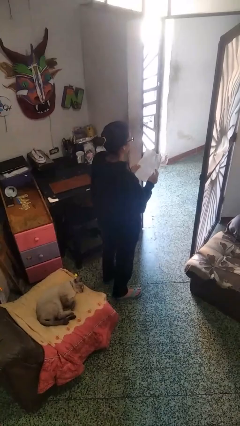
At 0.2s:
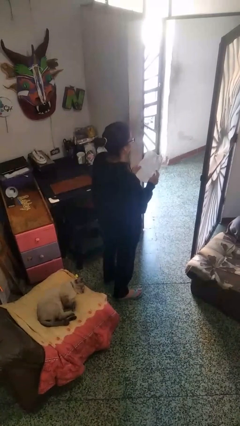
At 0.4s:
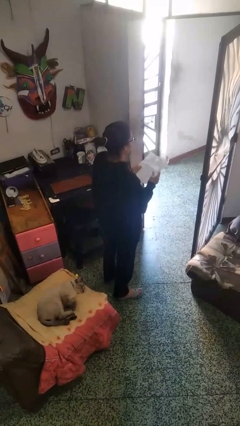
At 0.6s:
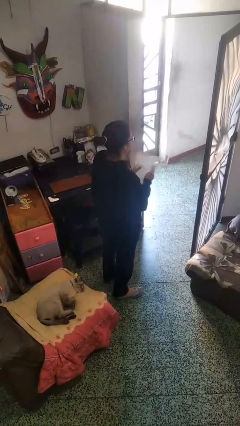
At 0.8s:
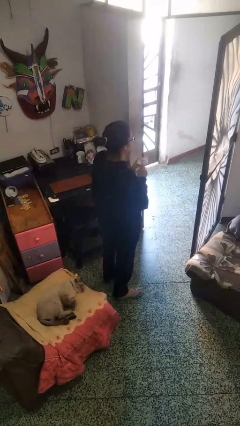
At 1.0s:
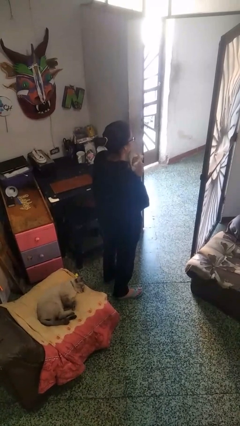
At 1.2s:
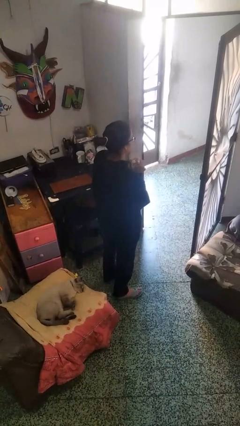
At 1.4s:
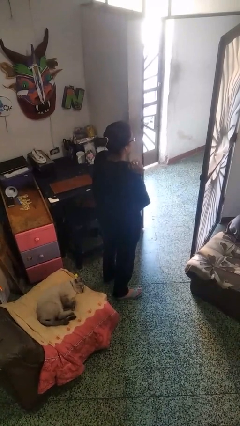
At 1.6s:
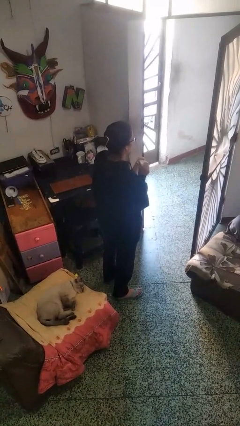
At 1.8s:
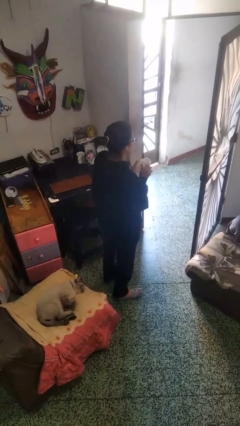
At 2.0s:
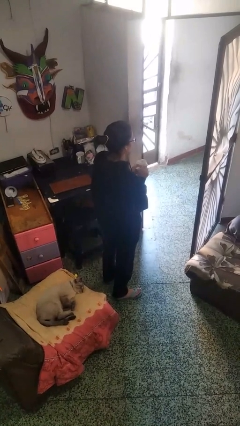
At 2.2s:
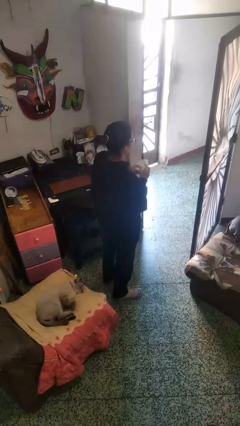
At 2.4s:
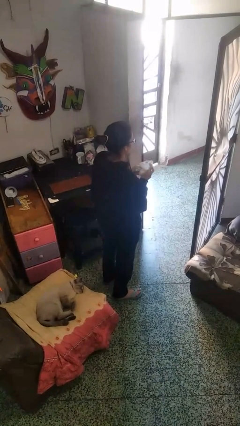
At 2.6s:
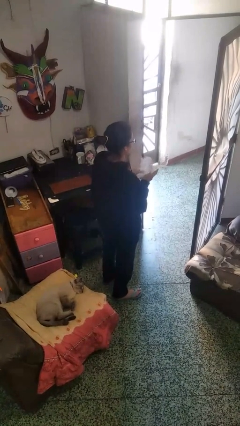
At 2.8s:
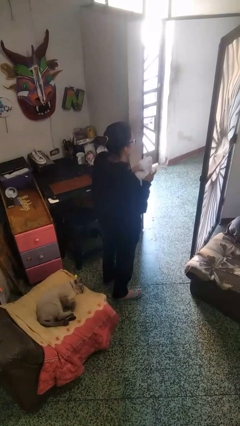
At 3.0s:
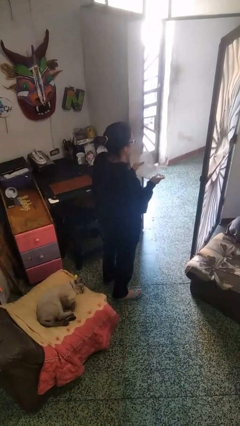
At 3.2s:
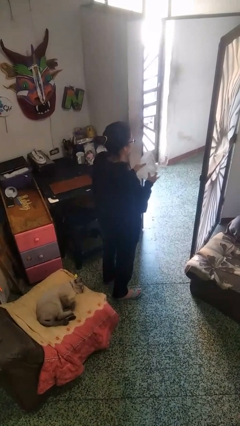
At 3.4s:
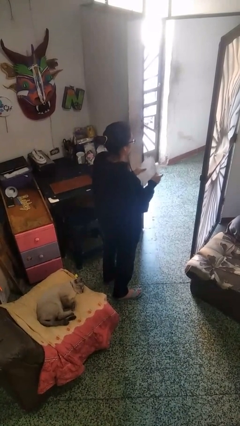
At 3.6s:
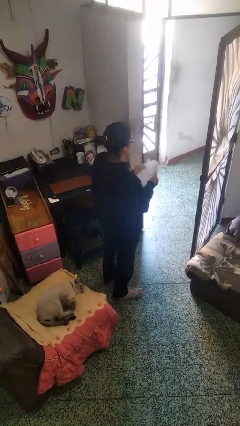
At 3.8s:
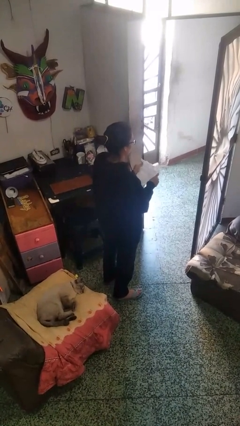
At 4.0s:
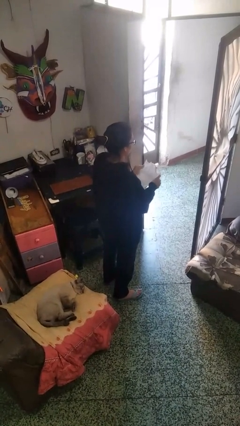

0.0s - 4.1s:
person crumples paper

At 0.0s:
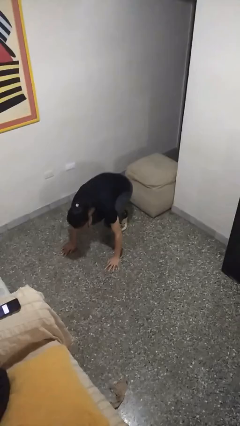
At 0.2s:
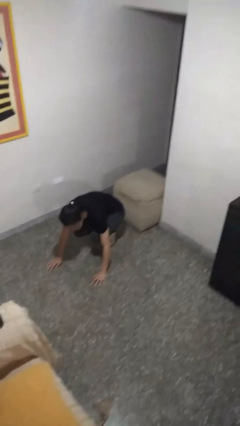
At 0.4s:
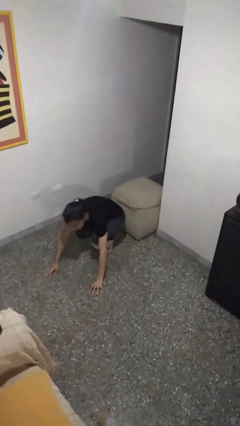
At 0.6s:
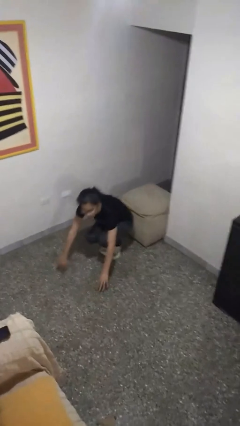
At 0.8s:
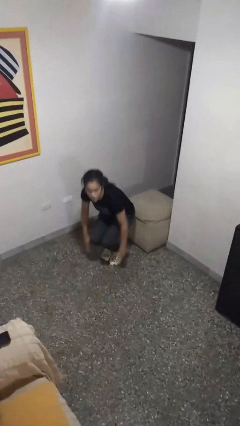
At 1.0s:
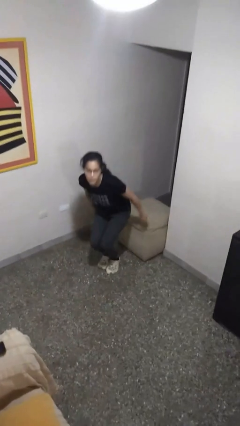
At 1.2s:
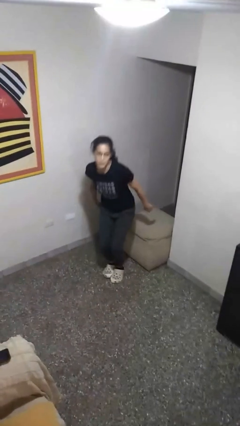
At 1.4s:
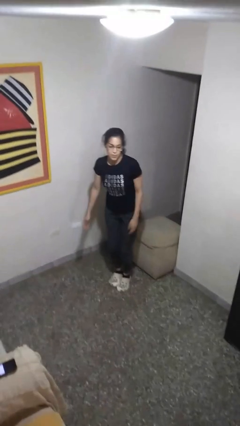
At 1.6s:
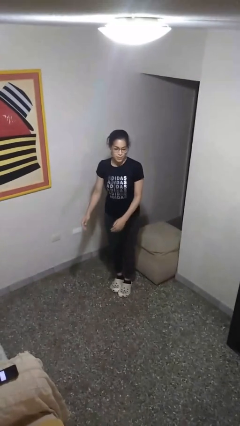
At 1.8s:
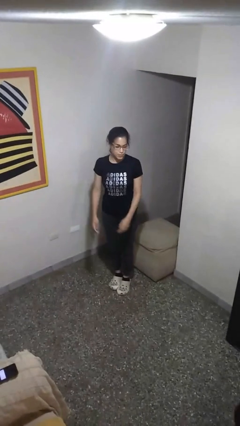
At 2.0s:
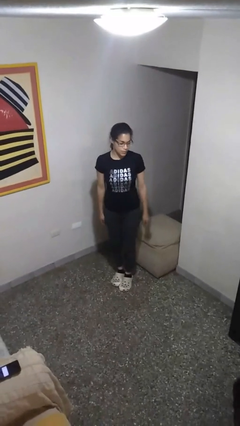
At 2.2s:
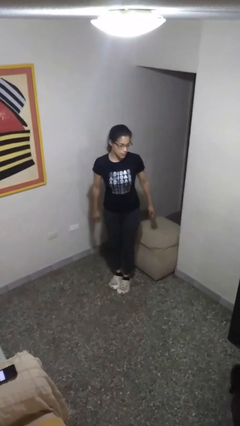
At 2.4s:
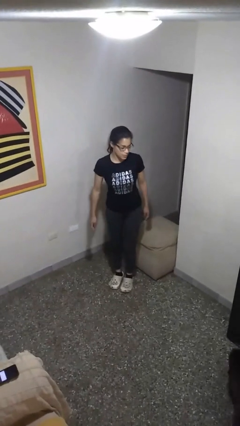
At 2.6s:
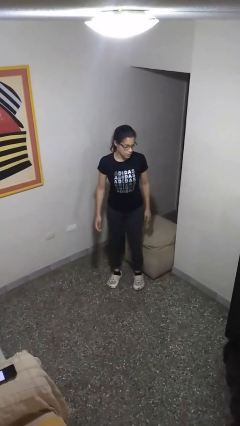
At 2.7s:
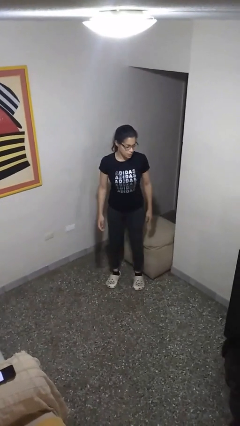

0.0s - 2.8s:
person stands up from floor

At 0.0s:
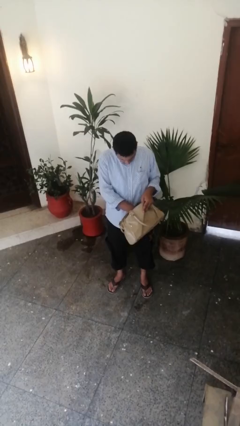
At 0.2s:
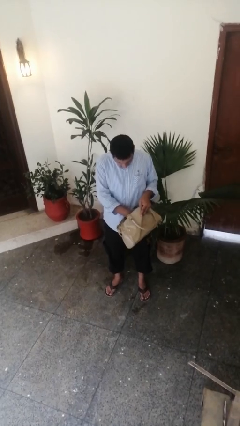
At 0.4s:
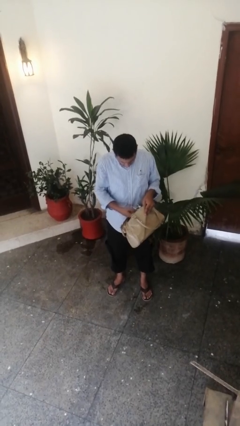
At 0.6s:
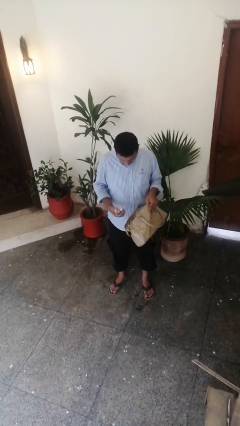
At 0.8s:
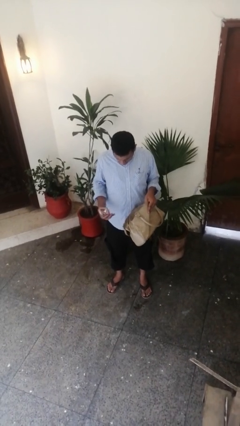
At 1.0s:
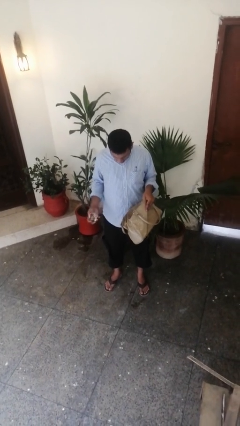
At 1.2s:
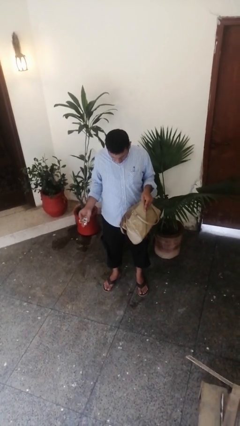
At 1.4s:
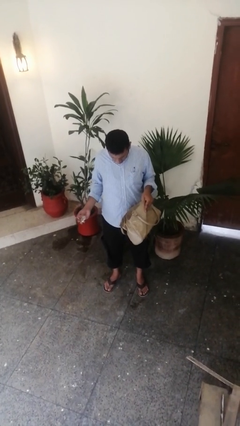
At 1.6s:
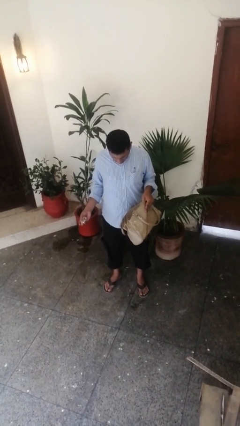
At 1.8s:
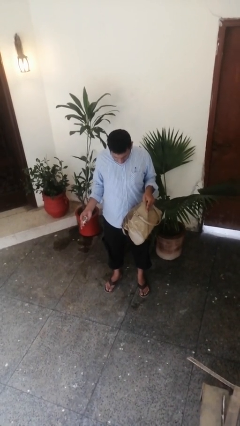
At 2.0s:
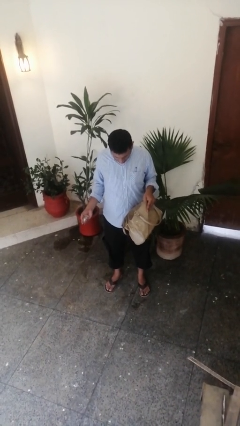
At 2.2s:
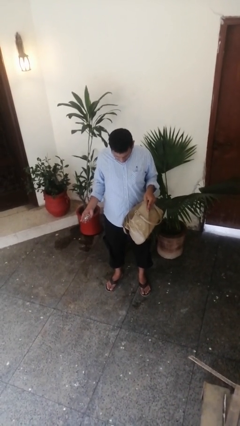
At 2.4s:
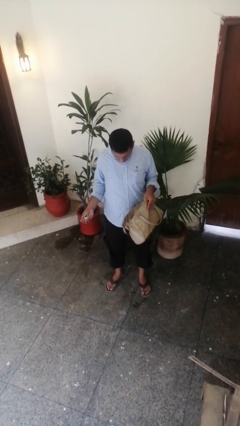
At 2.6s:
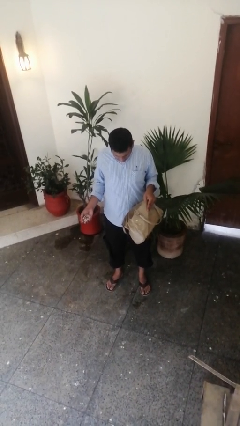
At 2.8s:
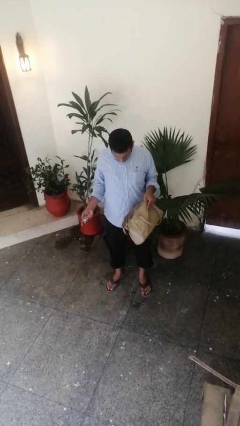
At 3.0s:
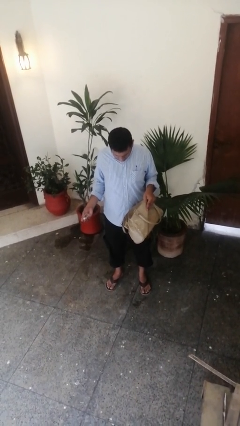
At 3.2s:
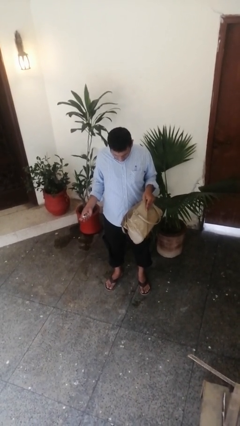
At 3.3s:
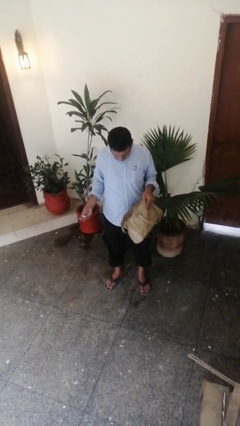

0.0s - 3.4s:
person takes object from purse

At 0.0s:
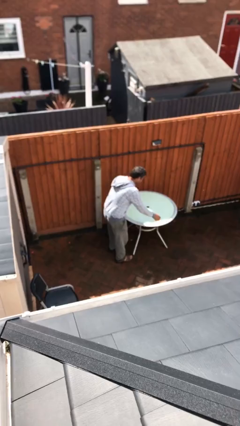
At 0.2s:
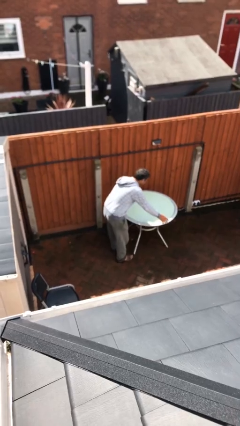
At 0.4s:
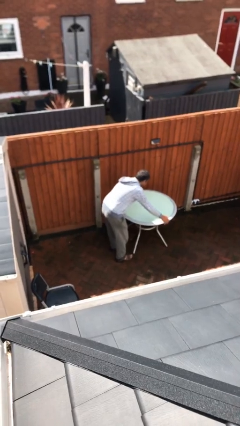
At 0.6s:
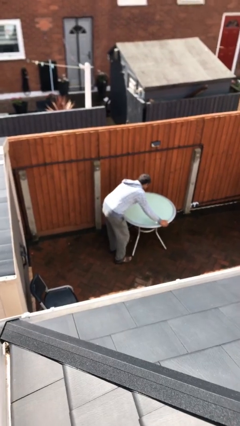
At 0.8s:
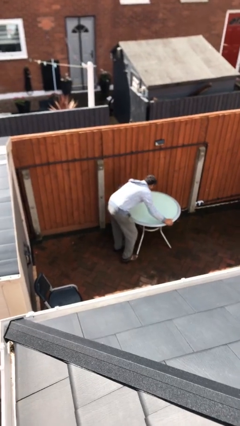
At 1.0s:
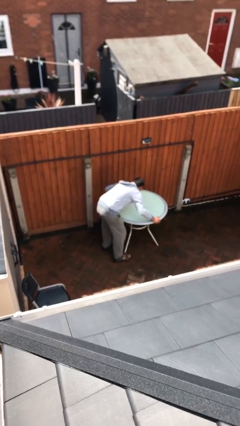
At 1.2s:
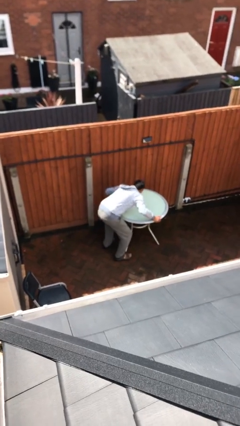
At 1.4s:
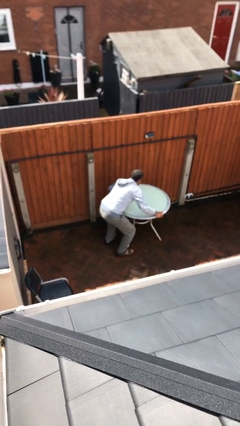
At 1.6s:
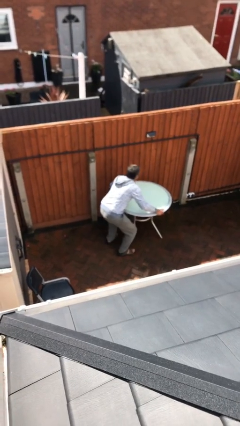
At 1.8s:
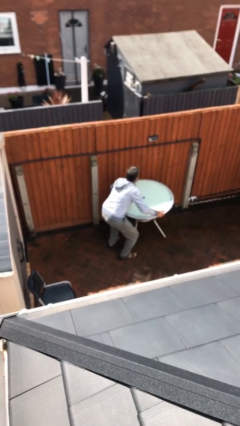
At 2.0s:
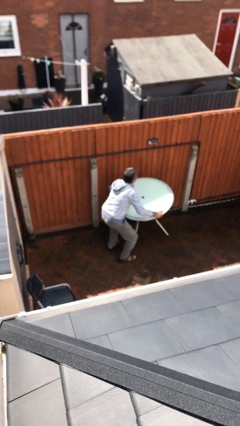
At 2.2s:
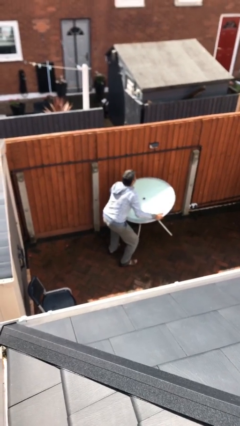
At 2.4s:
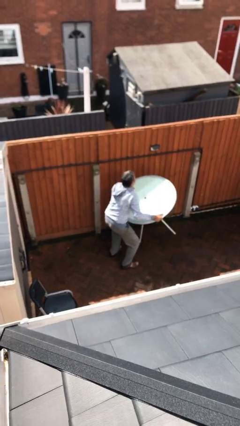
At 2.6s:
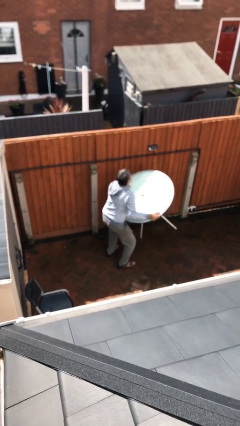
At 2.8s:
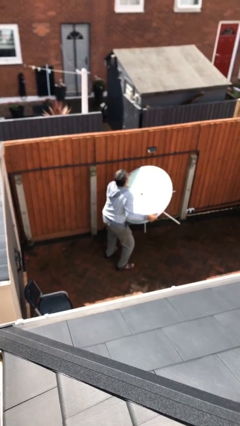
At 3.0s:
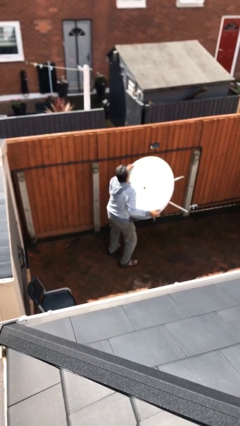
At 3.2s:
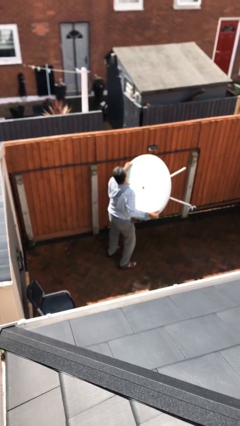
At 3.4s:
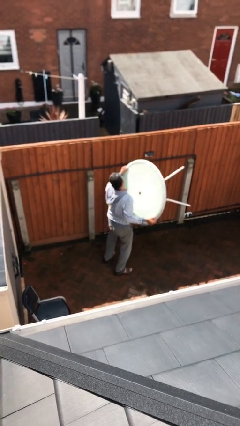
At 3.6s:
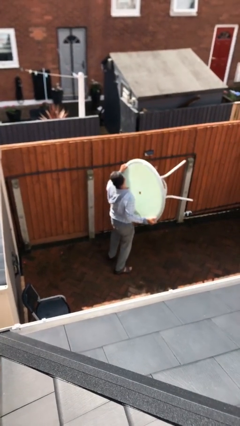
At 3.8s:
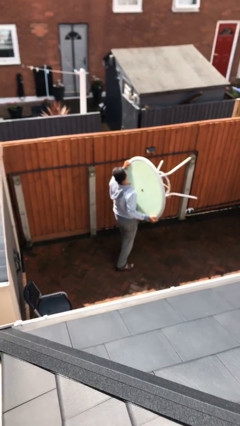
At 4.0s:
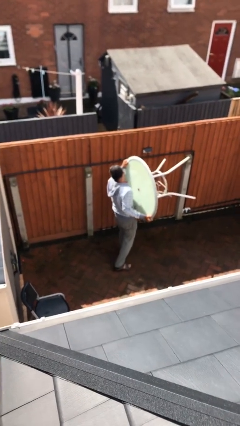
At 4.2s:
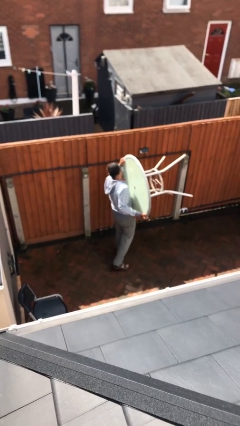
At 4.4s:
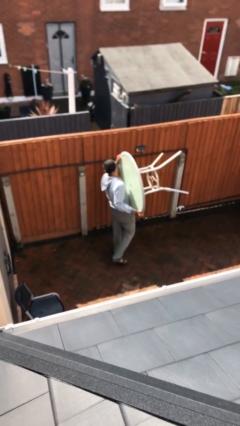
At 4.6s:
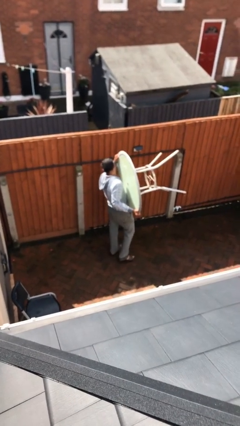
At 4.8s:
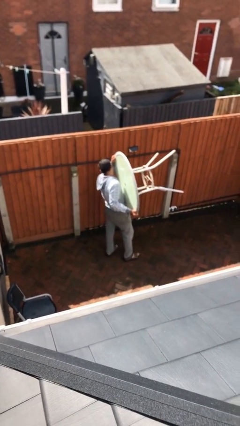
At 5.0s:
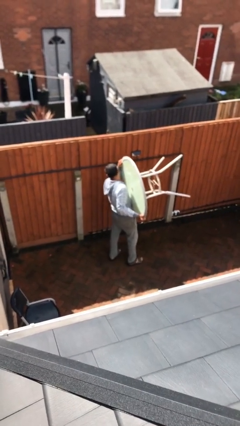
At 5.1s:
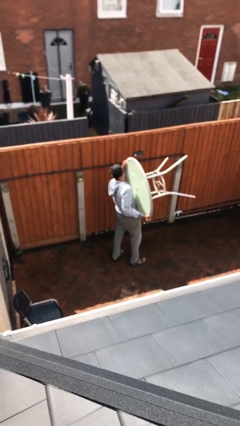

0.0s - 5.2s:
person picks up object from floor

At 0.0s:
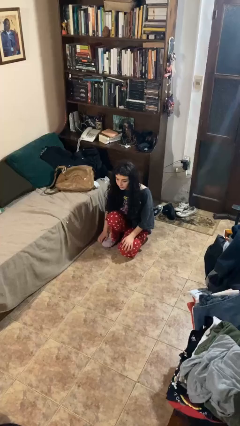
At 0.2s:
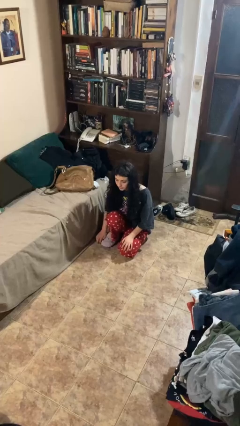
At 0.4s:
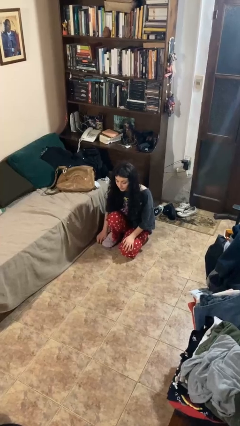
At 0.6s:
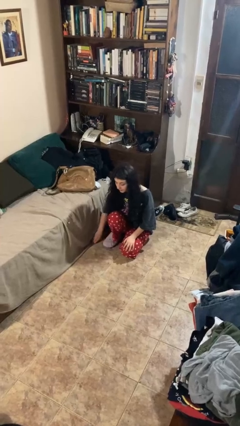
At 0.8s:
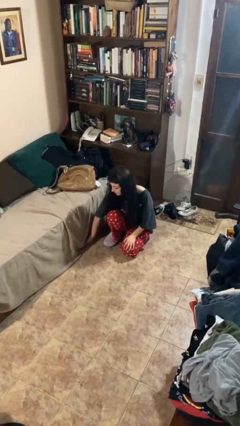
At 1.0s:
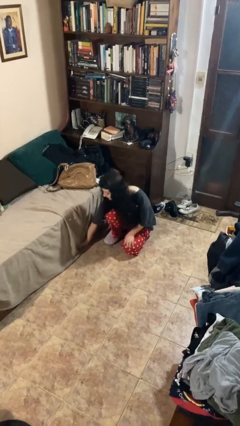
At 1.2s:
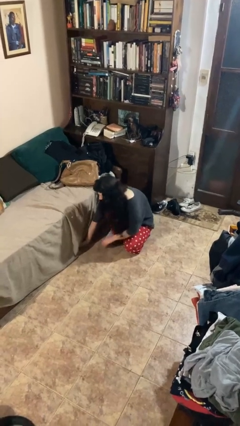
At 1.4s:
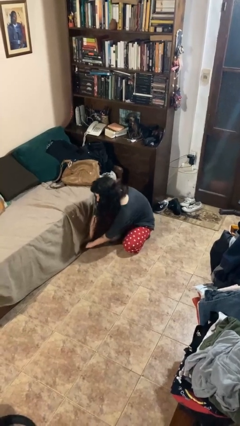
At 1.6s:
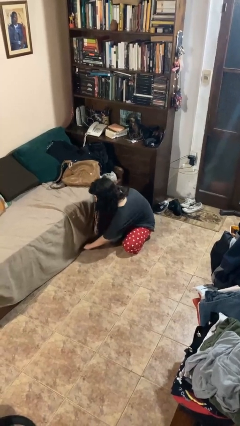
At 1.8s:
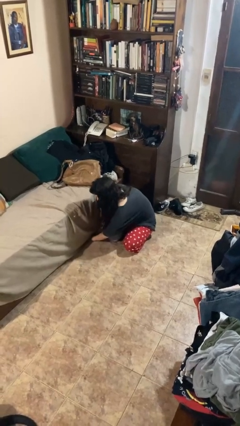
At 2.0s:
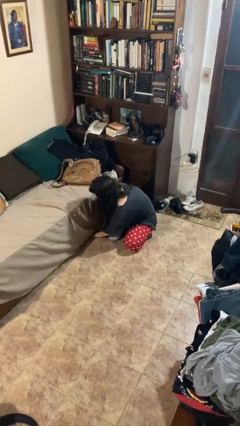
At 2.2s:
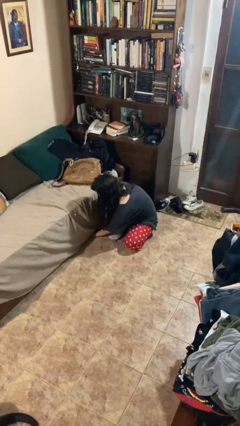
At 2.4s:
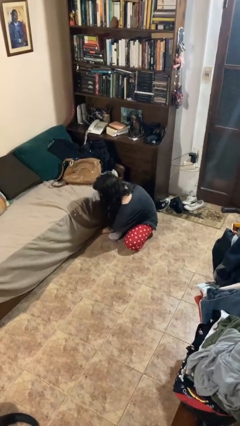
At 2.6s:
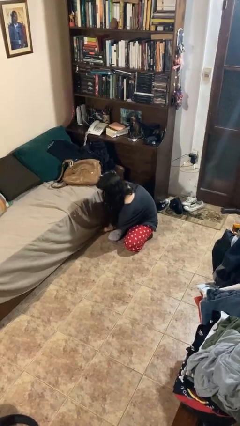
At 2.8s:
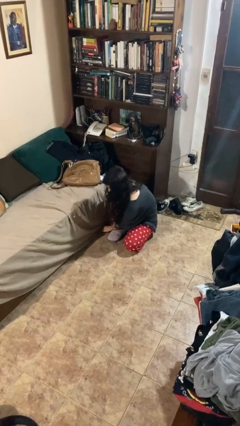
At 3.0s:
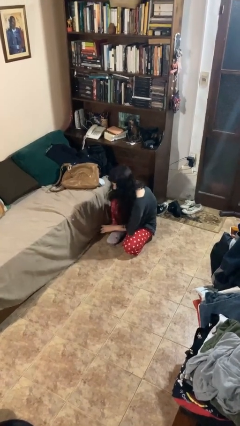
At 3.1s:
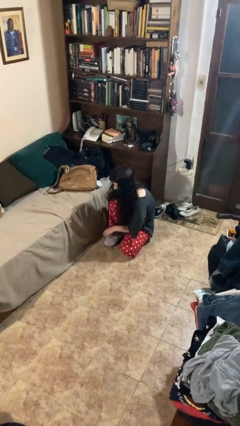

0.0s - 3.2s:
person searches under couch
